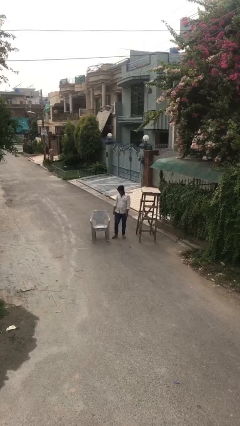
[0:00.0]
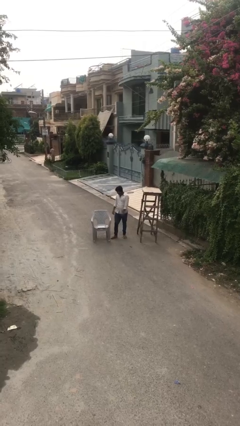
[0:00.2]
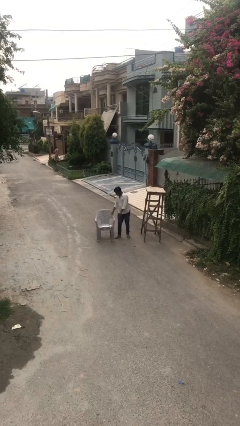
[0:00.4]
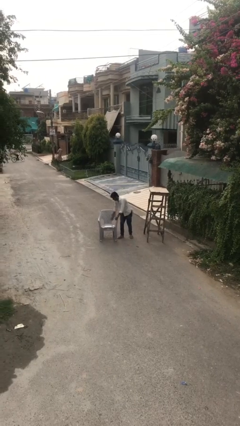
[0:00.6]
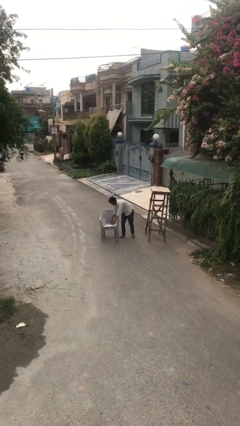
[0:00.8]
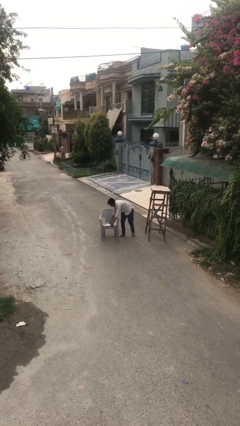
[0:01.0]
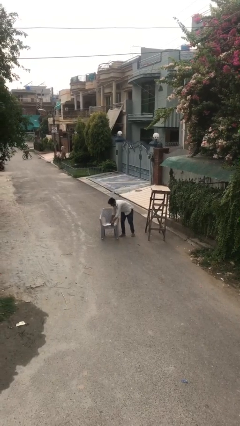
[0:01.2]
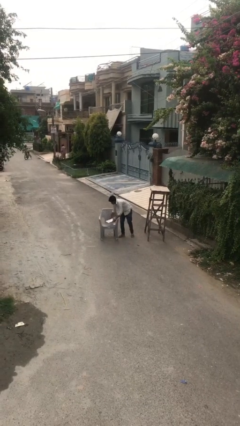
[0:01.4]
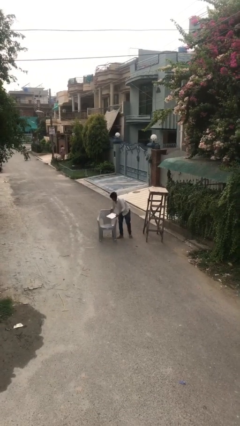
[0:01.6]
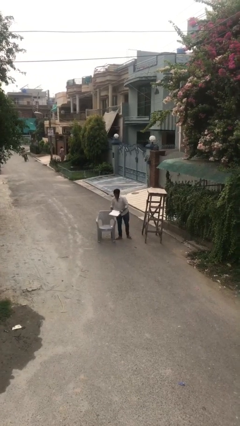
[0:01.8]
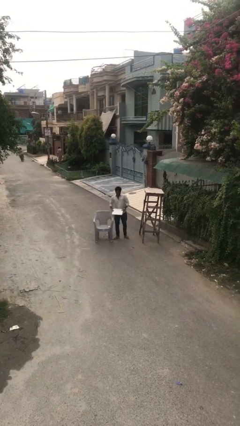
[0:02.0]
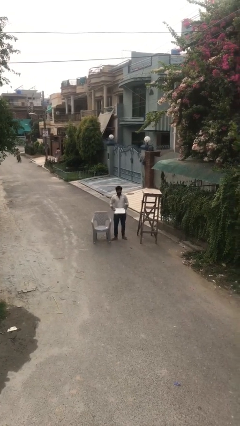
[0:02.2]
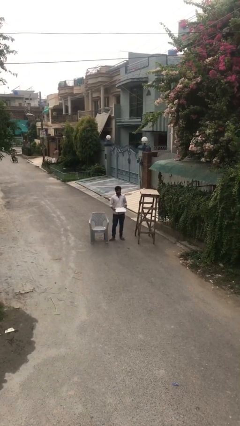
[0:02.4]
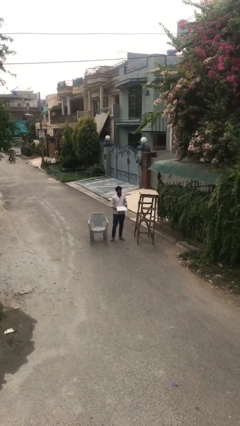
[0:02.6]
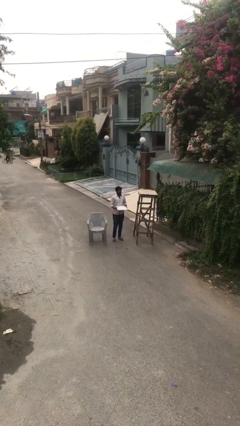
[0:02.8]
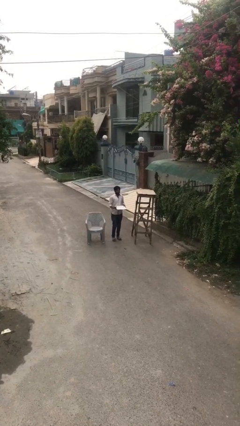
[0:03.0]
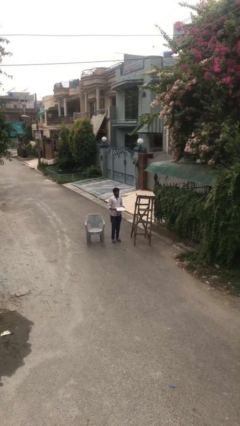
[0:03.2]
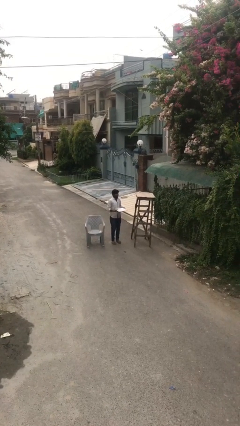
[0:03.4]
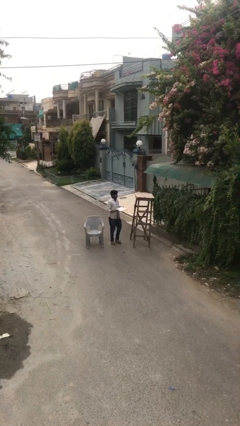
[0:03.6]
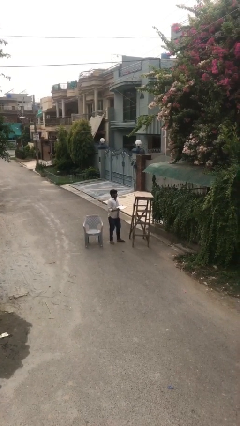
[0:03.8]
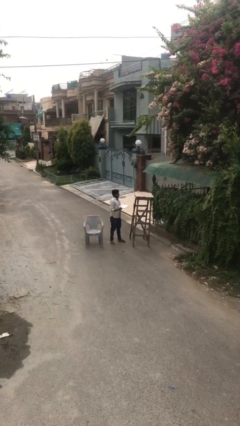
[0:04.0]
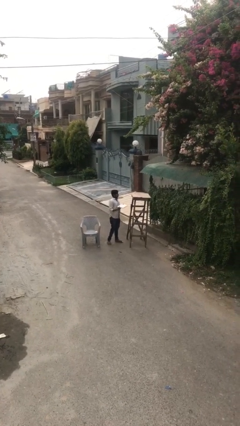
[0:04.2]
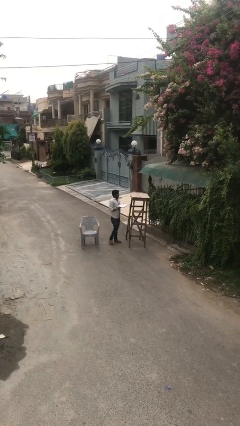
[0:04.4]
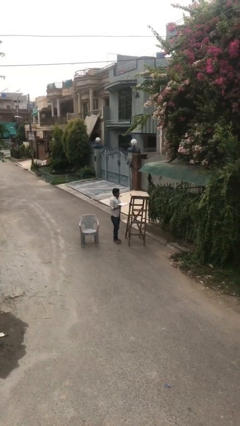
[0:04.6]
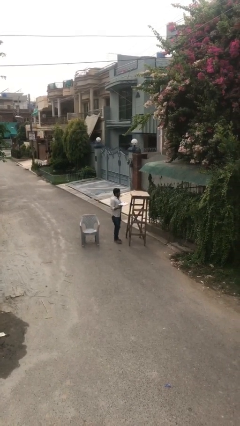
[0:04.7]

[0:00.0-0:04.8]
person picks up object from table

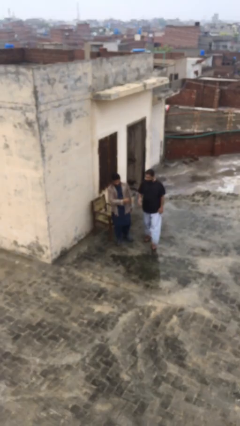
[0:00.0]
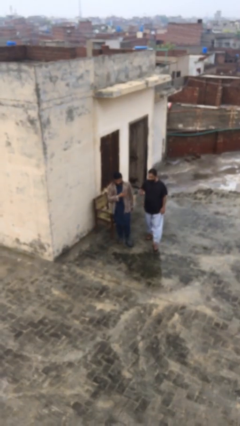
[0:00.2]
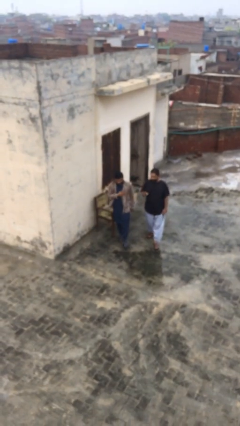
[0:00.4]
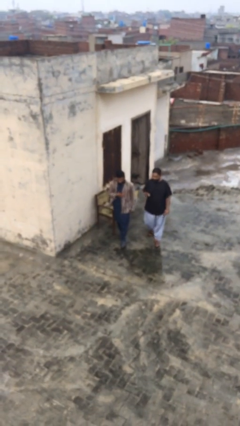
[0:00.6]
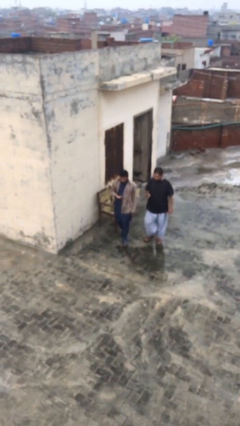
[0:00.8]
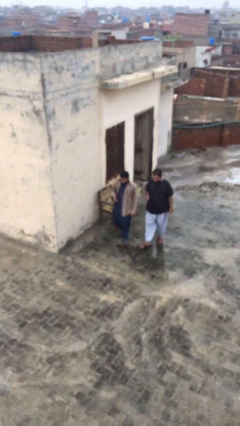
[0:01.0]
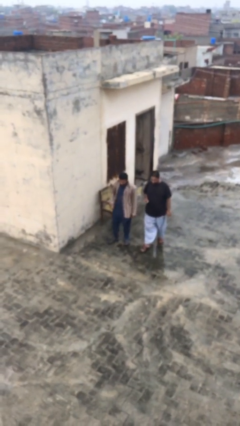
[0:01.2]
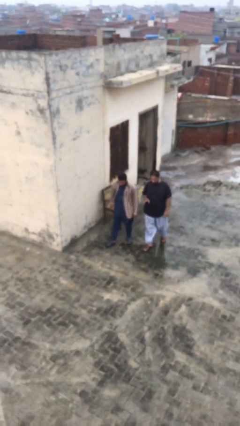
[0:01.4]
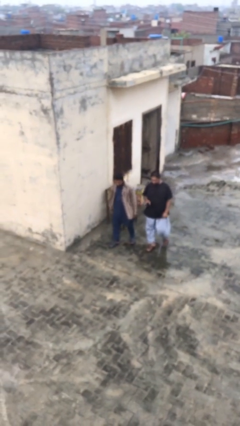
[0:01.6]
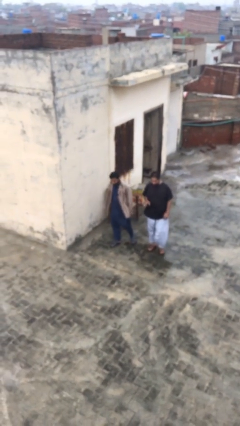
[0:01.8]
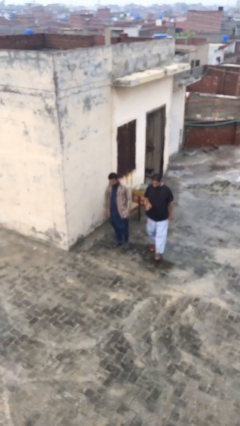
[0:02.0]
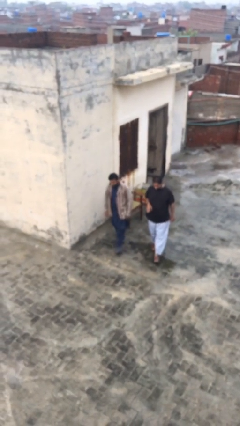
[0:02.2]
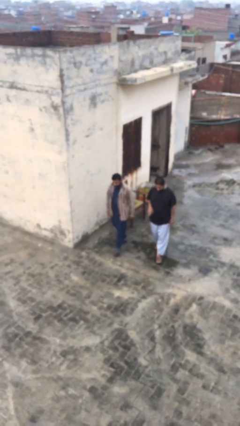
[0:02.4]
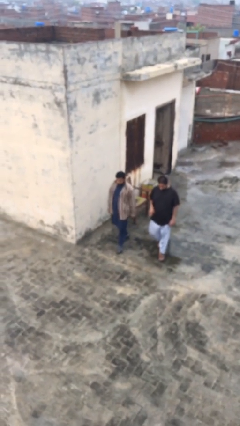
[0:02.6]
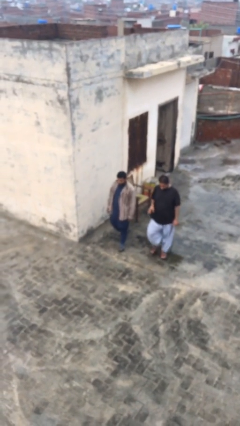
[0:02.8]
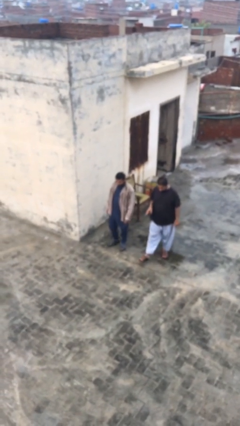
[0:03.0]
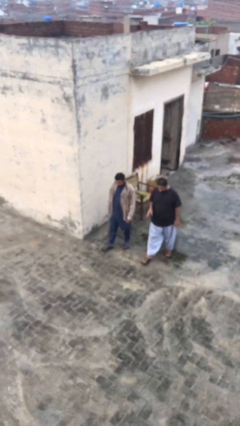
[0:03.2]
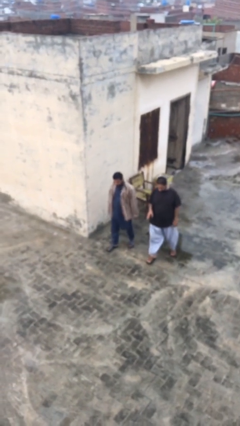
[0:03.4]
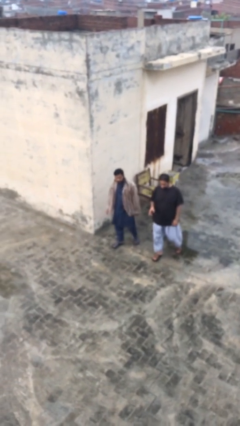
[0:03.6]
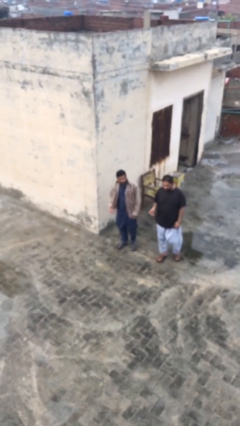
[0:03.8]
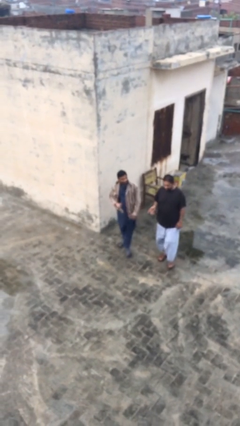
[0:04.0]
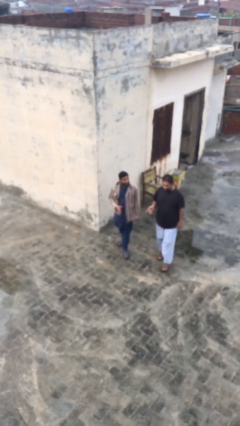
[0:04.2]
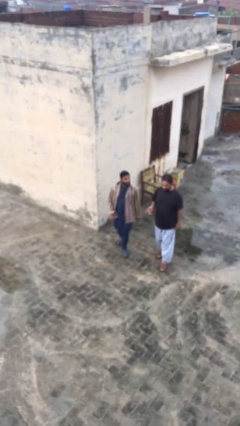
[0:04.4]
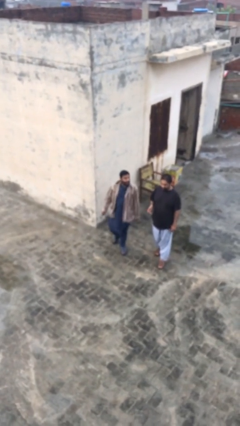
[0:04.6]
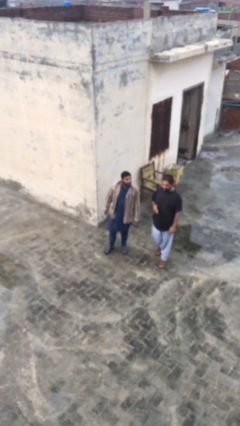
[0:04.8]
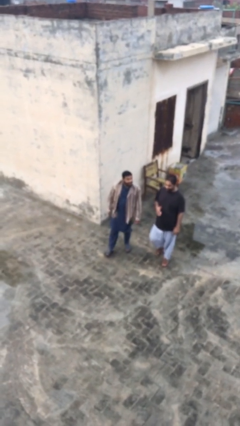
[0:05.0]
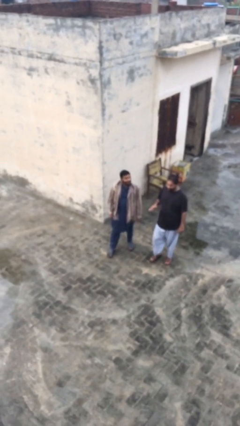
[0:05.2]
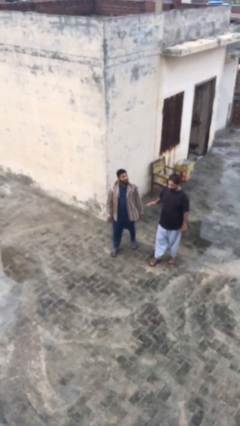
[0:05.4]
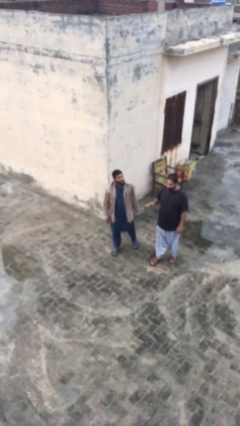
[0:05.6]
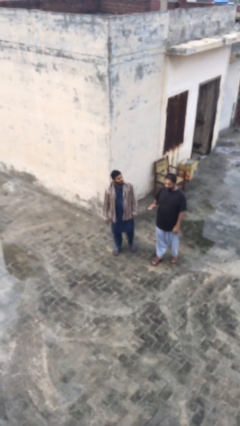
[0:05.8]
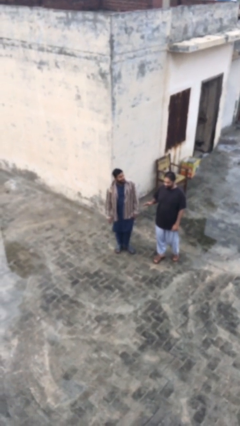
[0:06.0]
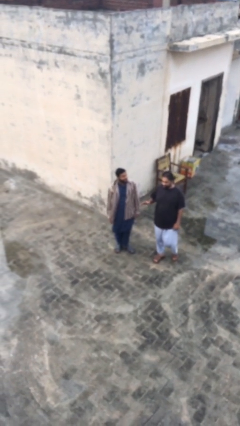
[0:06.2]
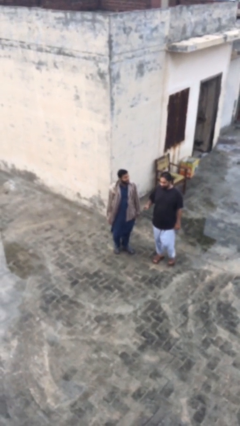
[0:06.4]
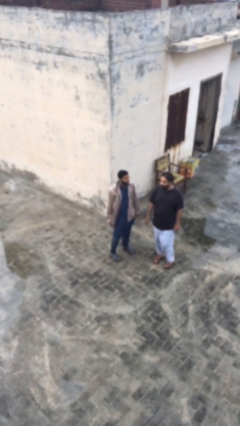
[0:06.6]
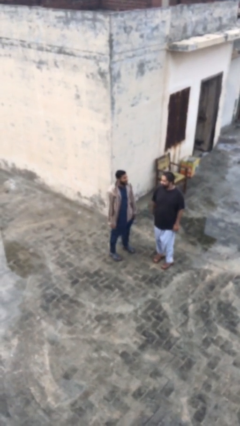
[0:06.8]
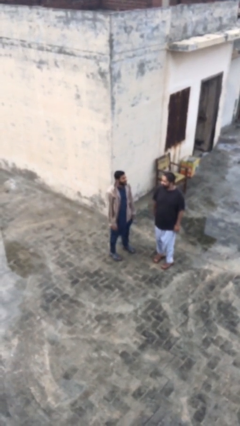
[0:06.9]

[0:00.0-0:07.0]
person talks to person

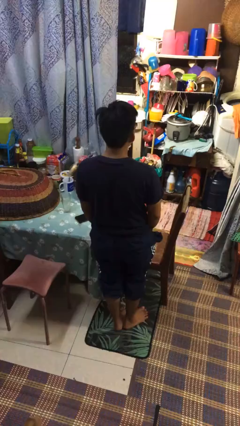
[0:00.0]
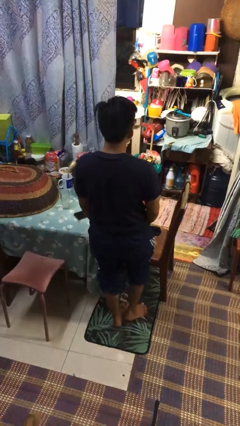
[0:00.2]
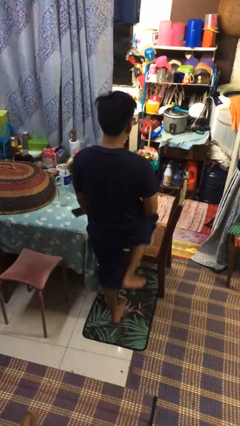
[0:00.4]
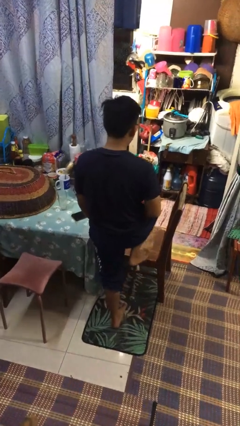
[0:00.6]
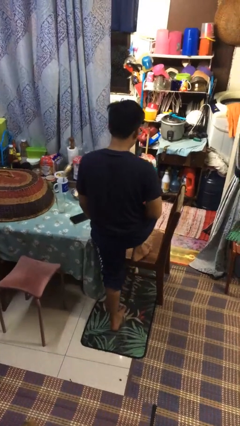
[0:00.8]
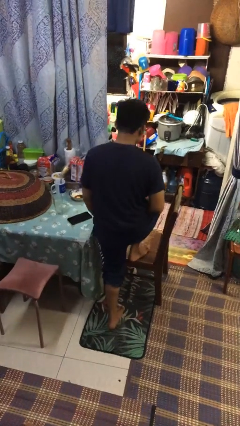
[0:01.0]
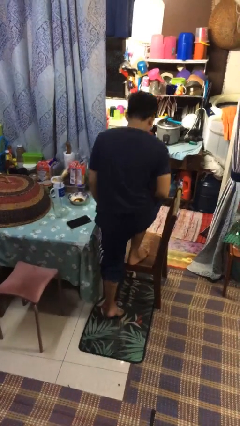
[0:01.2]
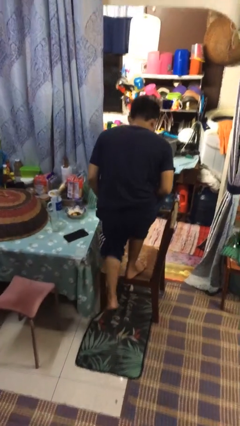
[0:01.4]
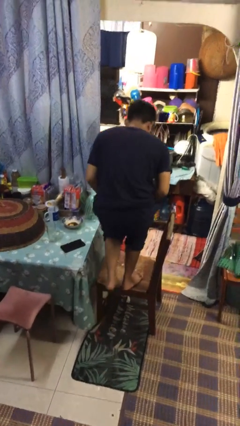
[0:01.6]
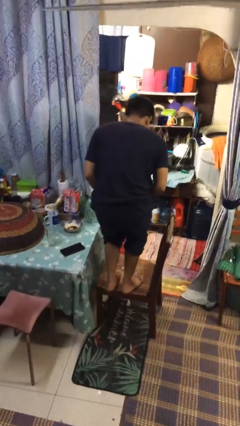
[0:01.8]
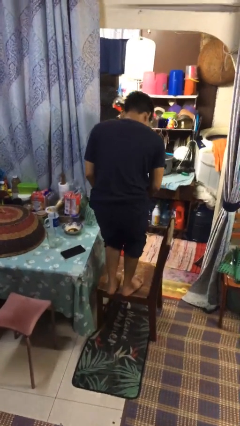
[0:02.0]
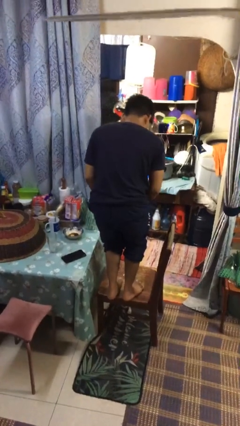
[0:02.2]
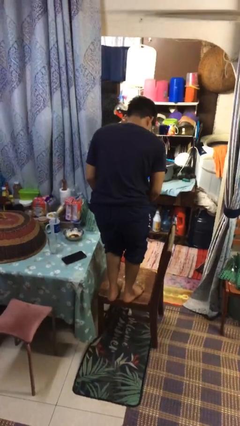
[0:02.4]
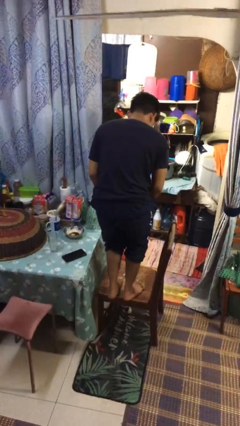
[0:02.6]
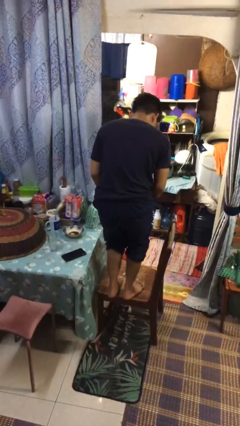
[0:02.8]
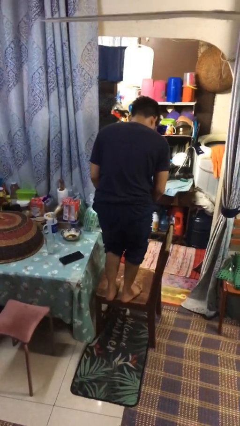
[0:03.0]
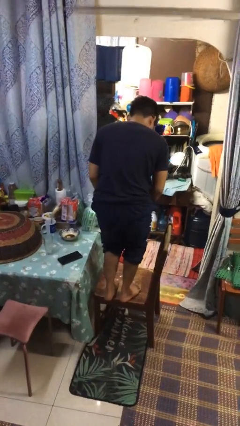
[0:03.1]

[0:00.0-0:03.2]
person climbs on chair

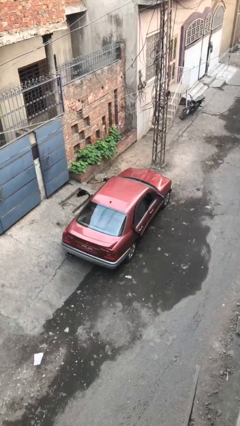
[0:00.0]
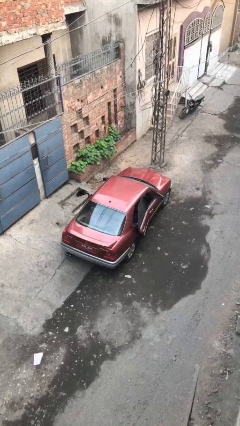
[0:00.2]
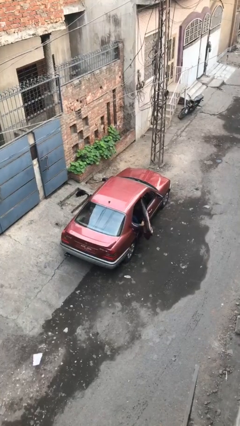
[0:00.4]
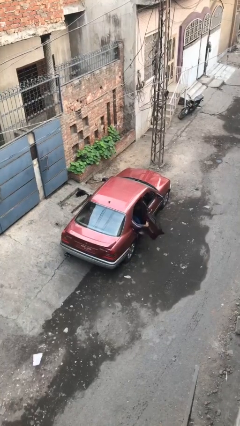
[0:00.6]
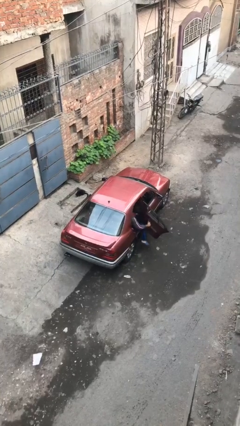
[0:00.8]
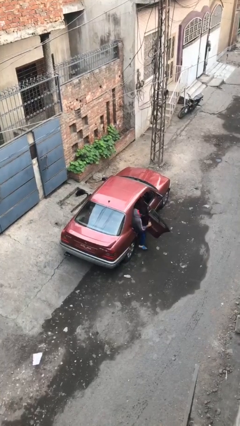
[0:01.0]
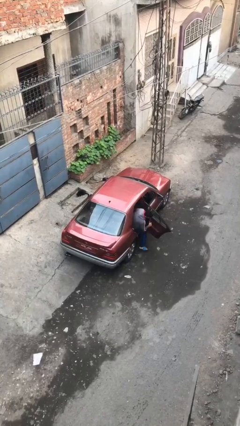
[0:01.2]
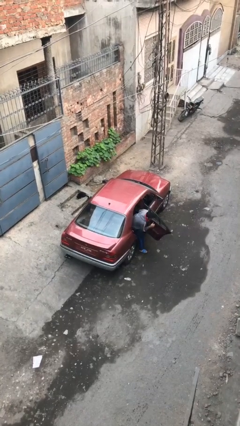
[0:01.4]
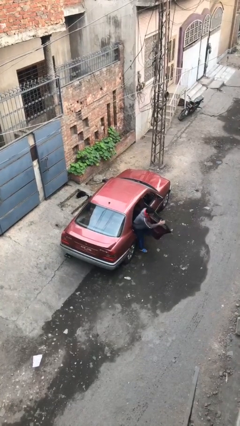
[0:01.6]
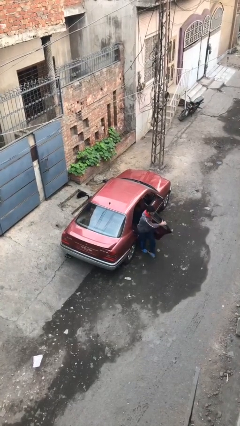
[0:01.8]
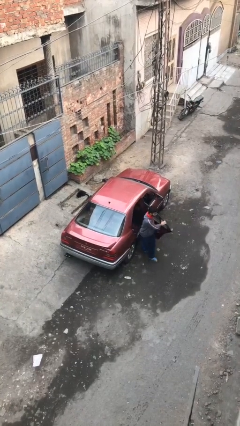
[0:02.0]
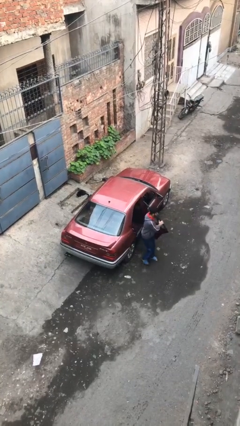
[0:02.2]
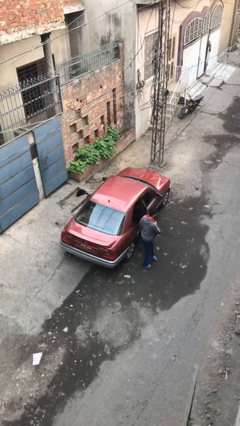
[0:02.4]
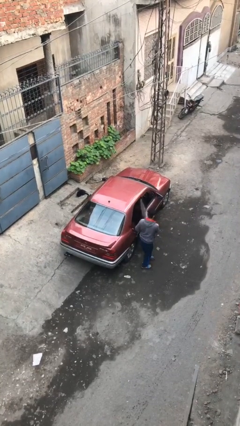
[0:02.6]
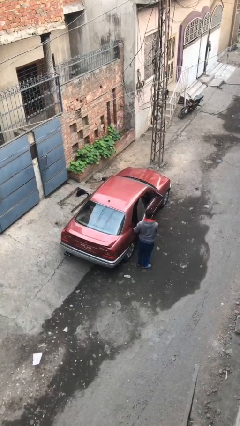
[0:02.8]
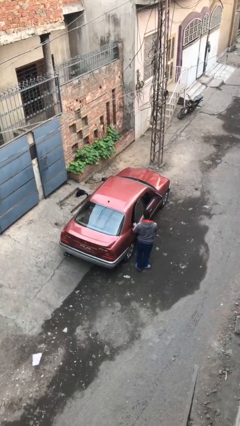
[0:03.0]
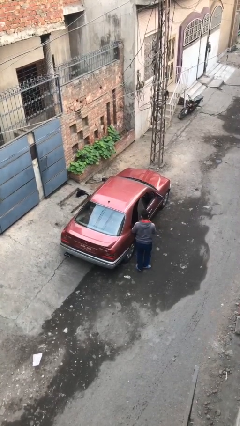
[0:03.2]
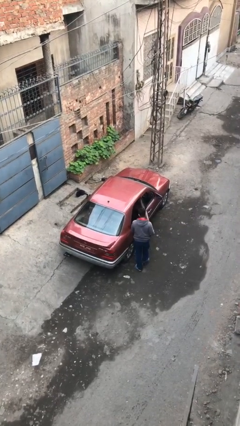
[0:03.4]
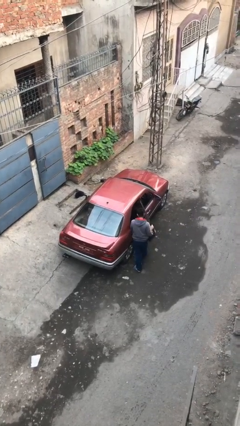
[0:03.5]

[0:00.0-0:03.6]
car drops off person
